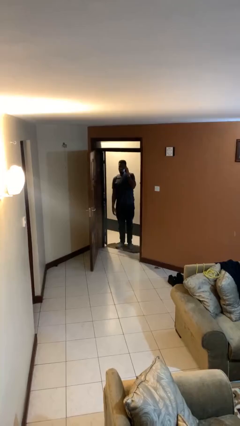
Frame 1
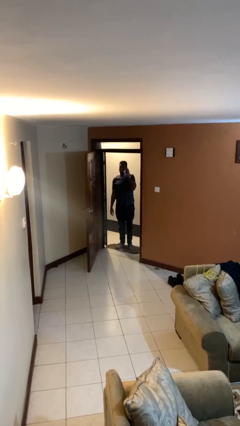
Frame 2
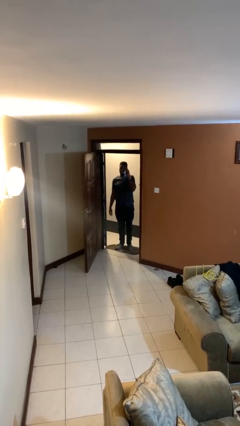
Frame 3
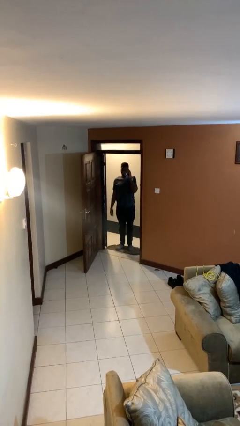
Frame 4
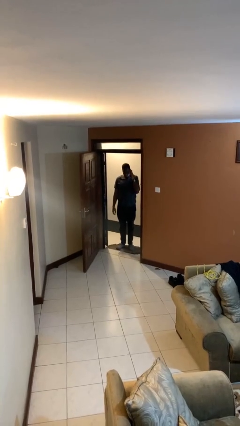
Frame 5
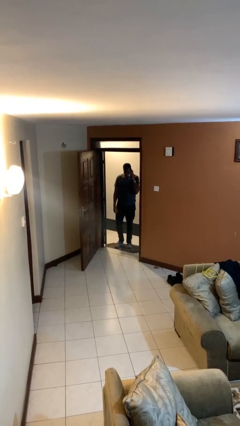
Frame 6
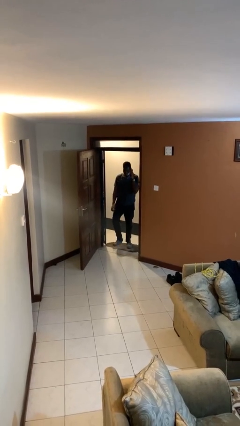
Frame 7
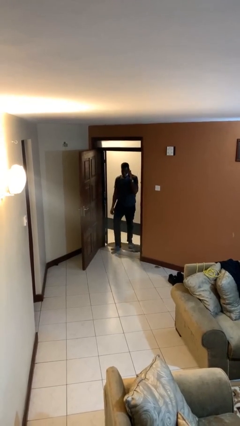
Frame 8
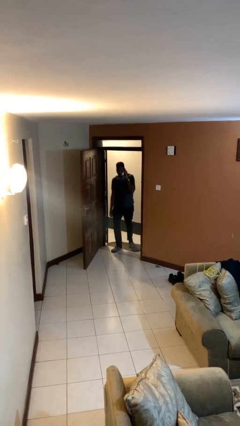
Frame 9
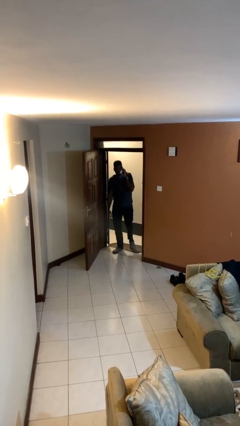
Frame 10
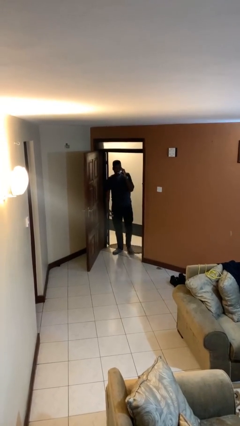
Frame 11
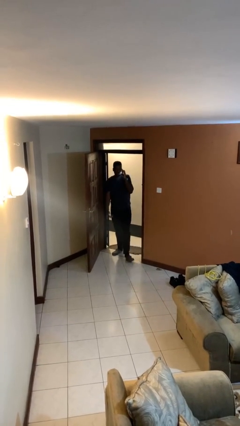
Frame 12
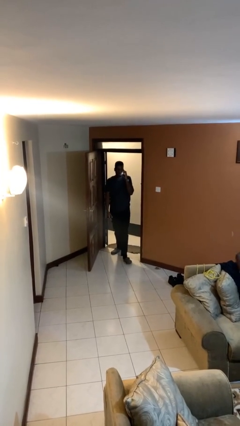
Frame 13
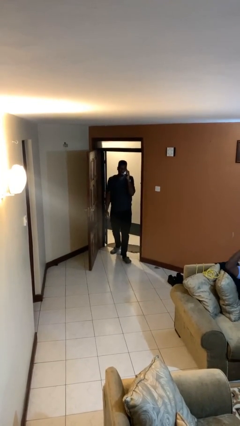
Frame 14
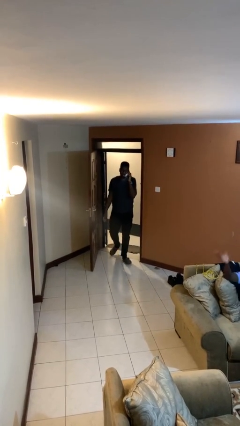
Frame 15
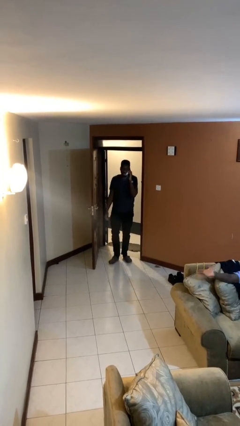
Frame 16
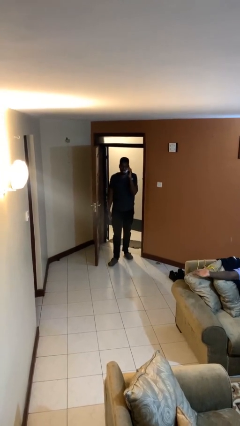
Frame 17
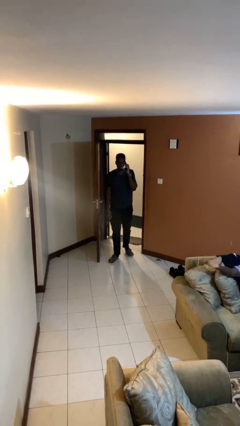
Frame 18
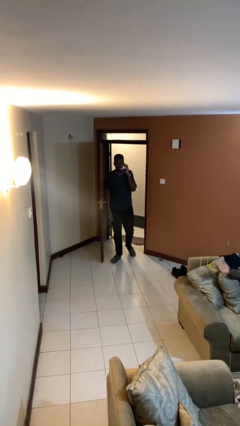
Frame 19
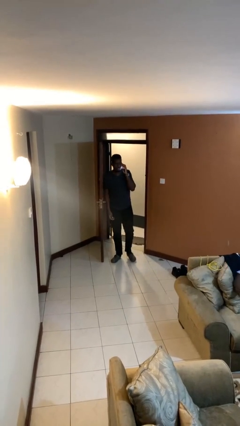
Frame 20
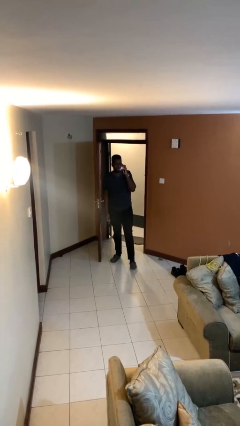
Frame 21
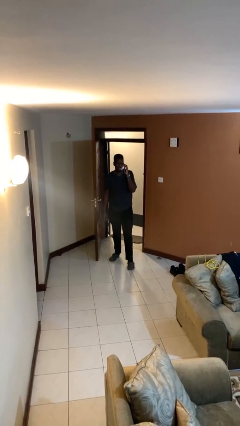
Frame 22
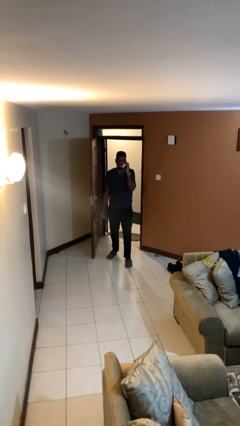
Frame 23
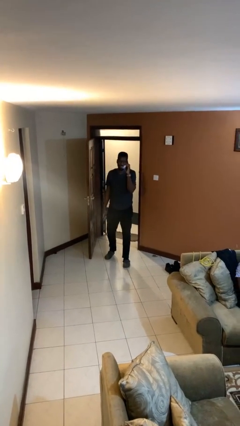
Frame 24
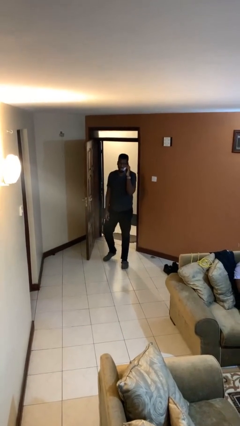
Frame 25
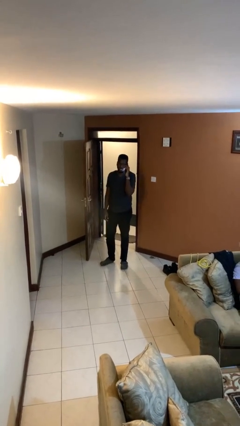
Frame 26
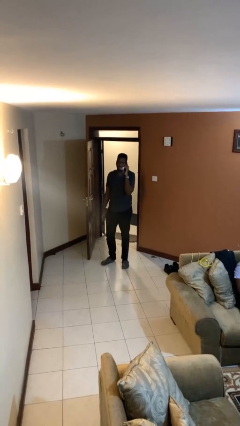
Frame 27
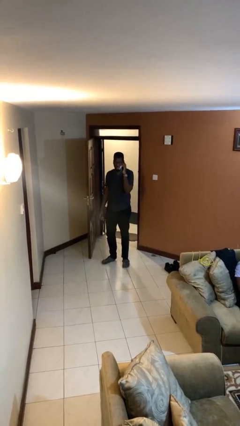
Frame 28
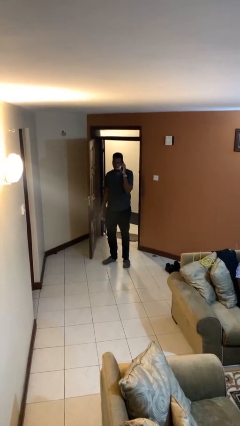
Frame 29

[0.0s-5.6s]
person enters scene through structure

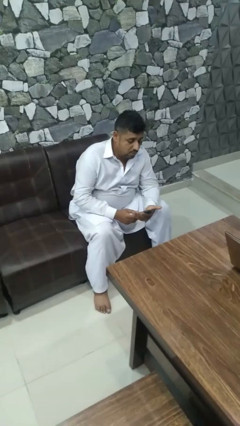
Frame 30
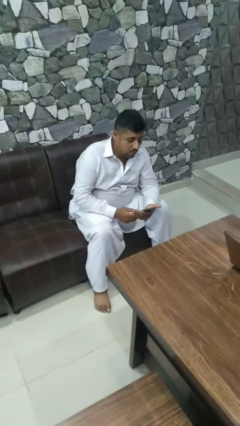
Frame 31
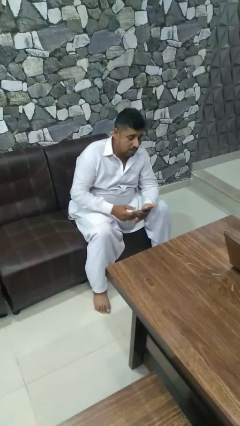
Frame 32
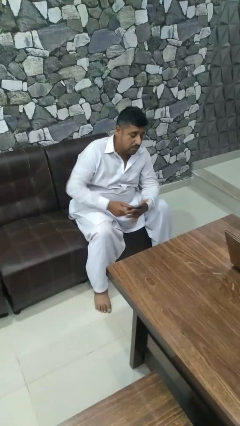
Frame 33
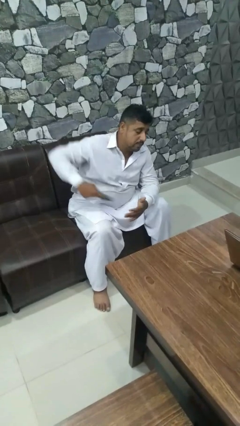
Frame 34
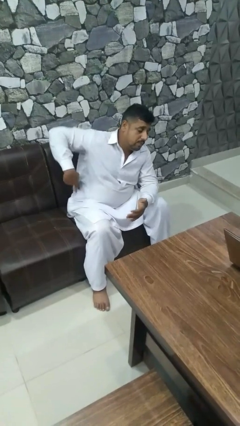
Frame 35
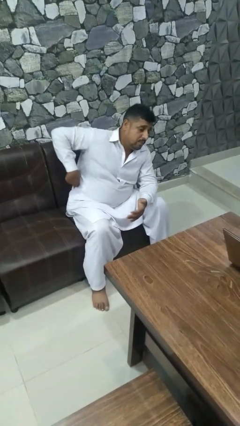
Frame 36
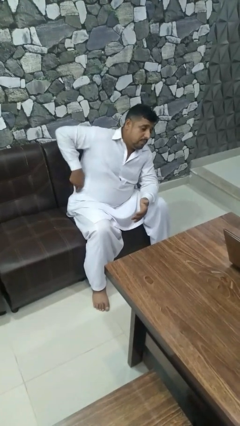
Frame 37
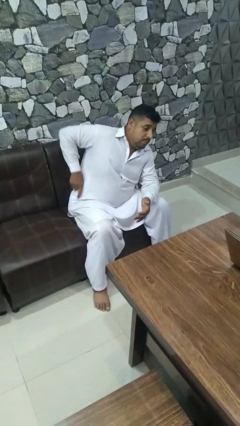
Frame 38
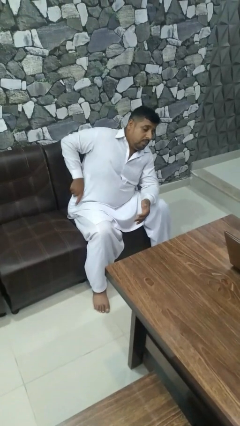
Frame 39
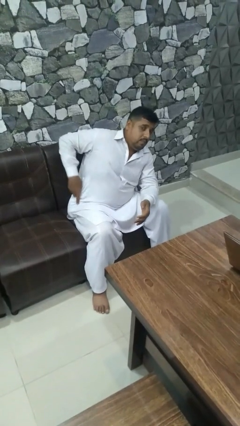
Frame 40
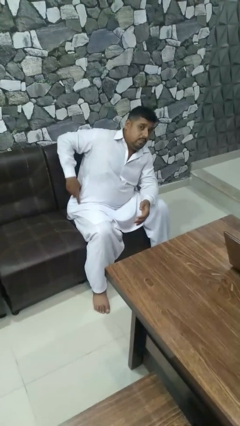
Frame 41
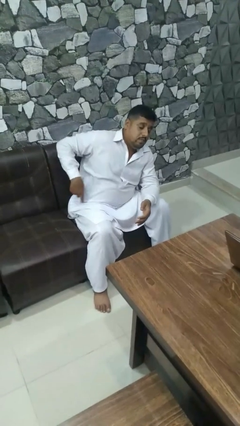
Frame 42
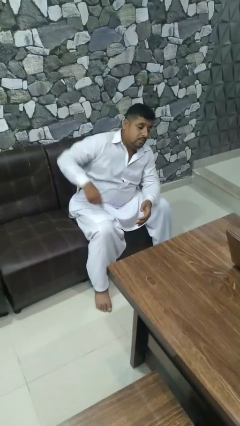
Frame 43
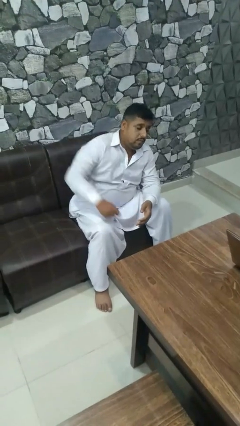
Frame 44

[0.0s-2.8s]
person puts phone into pocket

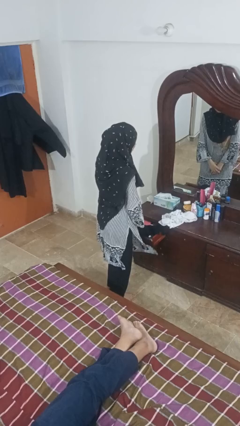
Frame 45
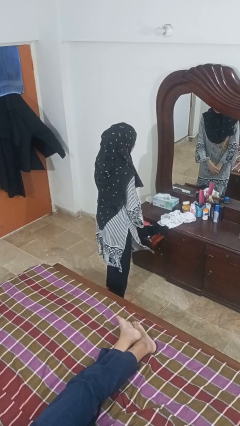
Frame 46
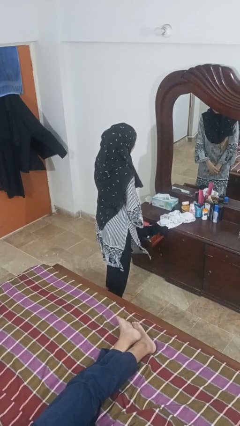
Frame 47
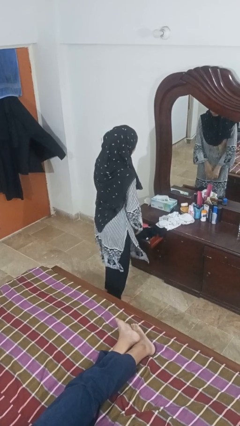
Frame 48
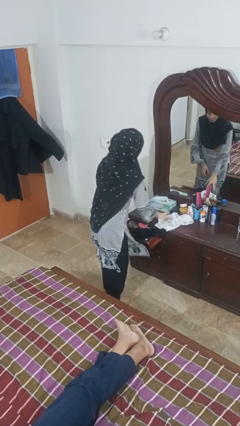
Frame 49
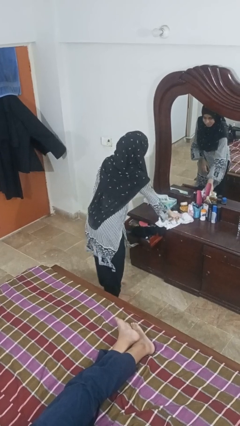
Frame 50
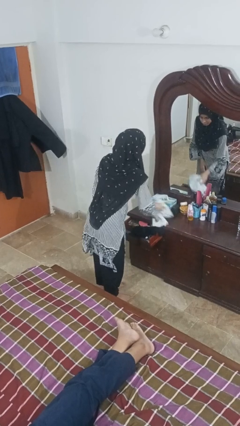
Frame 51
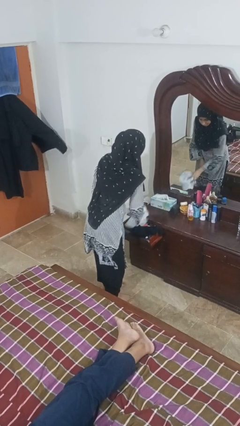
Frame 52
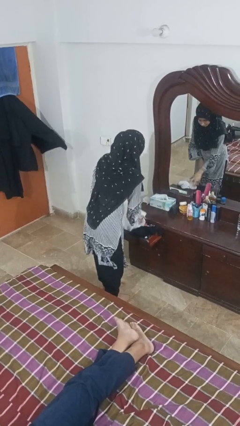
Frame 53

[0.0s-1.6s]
person puts clothes into dresser

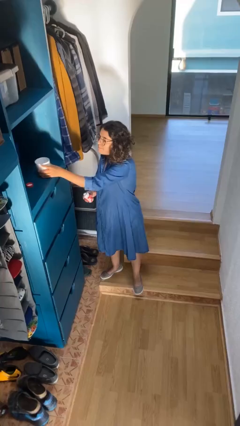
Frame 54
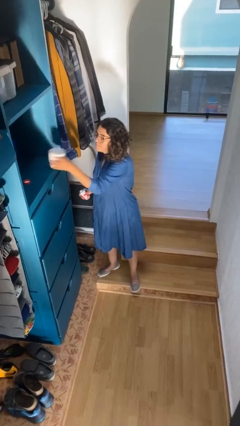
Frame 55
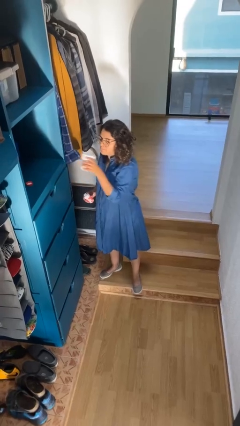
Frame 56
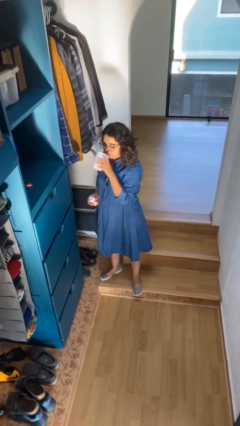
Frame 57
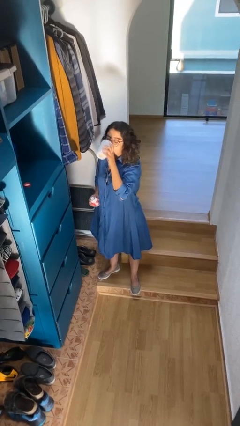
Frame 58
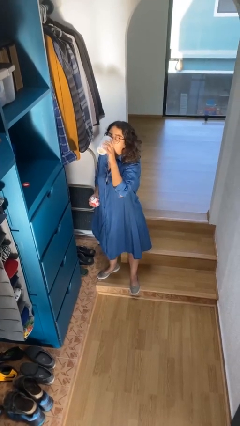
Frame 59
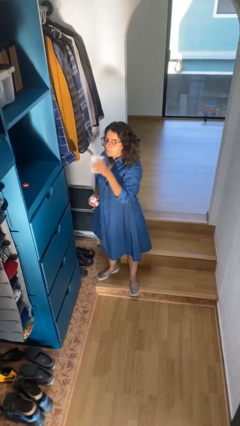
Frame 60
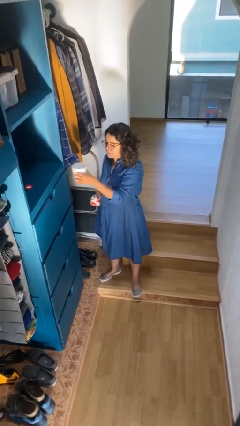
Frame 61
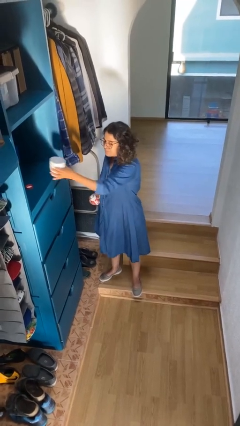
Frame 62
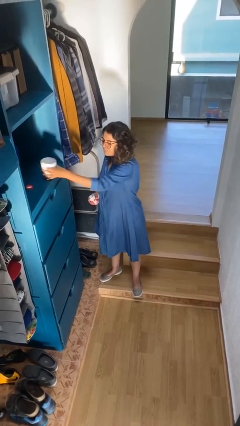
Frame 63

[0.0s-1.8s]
person drinks from cup

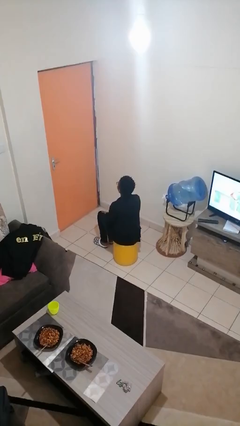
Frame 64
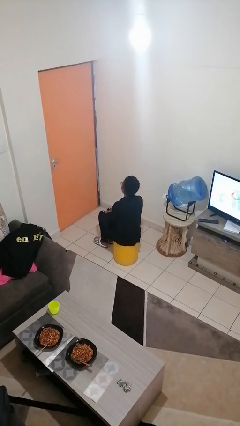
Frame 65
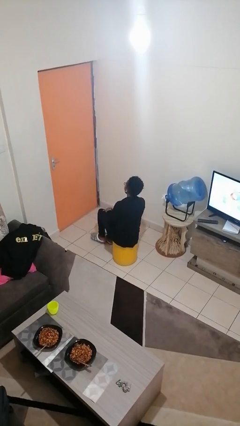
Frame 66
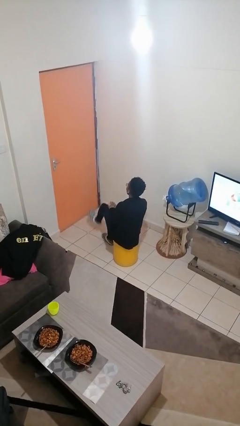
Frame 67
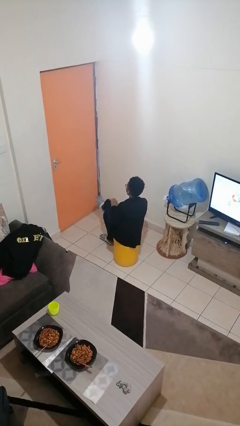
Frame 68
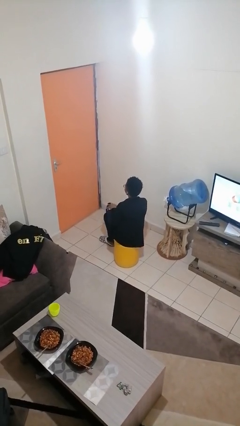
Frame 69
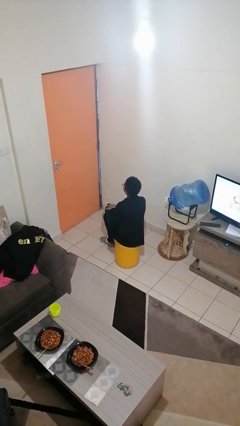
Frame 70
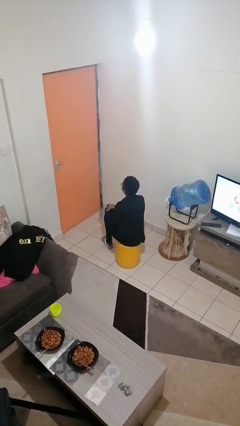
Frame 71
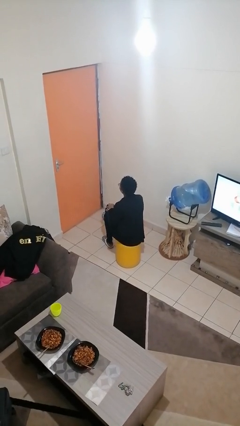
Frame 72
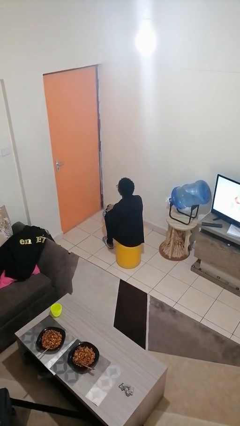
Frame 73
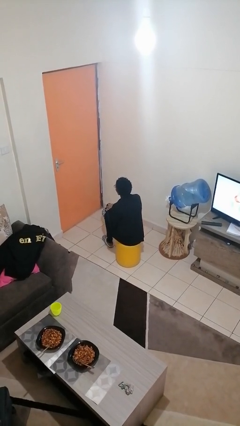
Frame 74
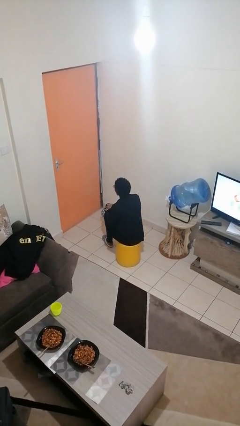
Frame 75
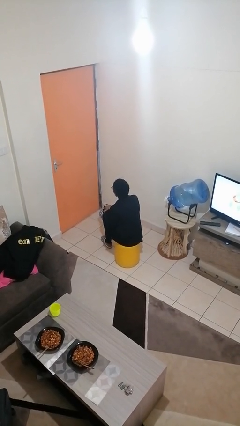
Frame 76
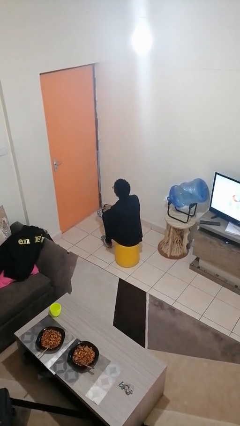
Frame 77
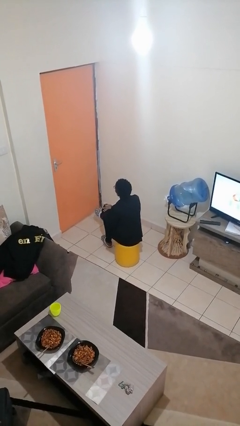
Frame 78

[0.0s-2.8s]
person crosses legs

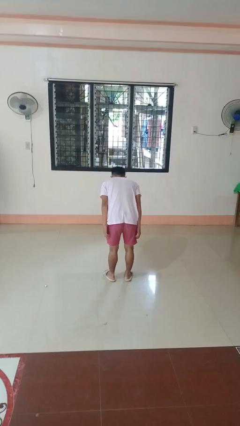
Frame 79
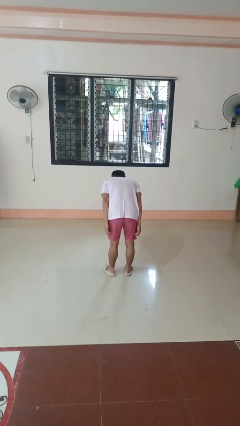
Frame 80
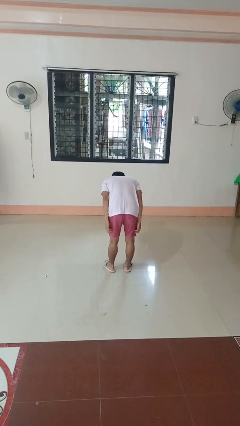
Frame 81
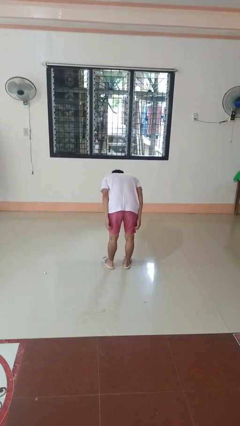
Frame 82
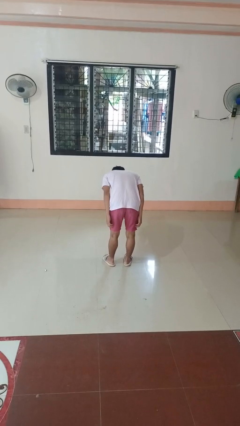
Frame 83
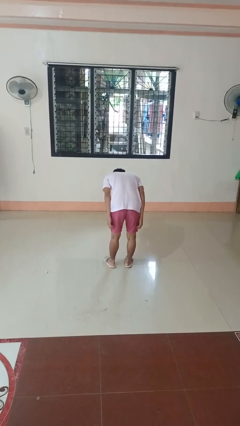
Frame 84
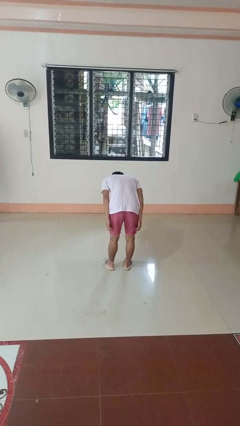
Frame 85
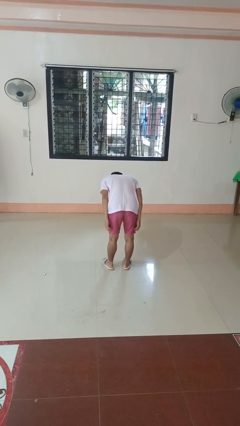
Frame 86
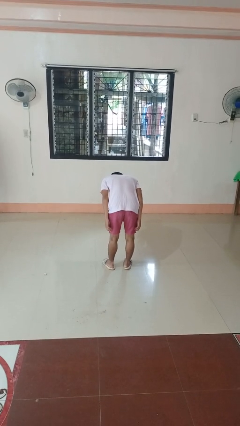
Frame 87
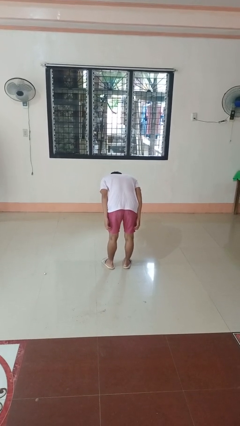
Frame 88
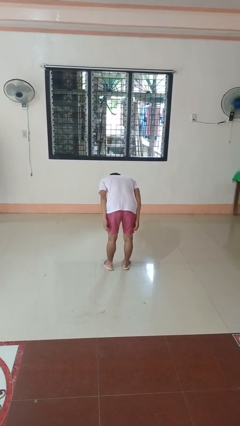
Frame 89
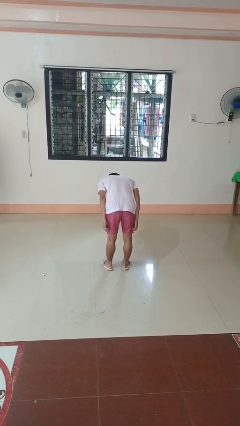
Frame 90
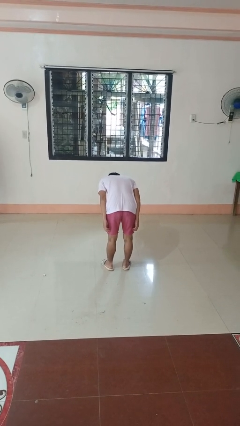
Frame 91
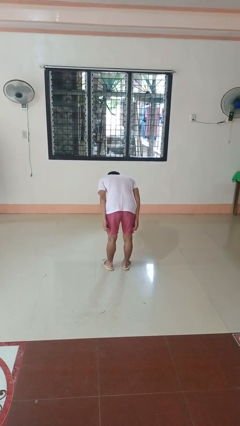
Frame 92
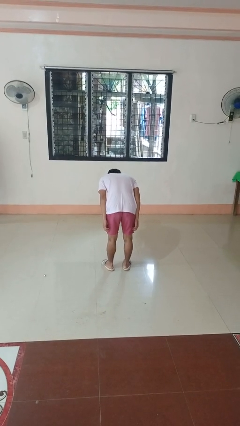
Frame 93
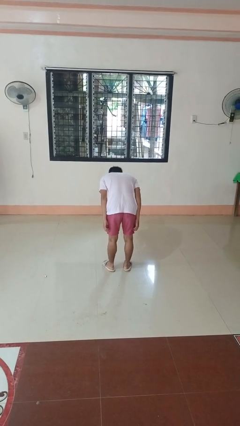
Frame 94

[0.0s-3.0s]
person bows
